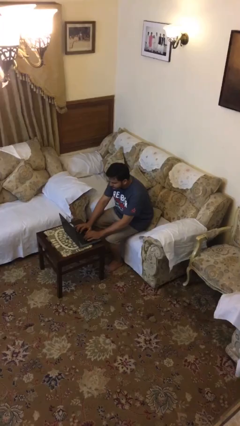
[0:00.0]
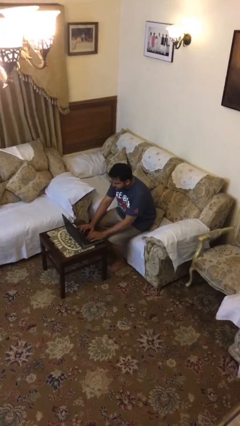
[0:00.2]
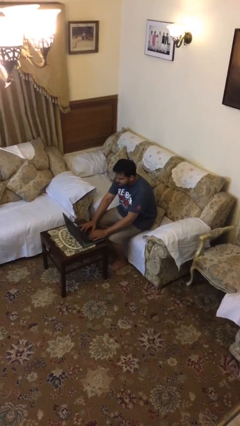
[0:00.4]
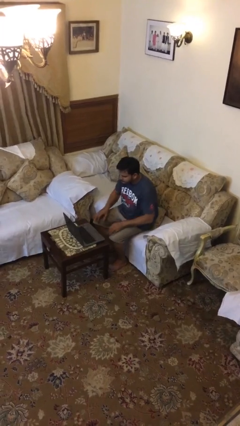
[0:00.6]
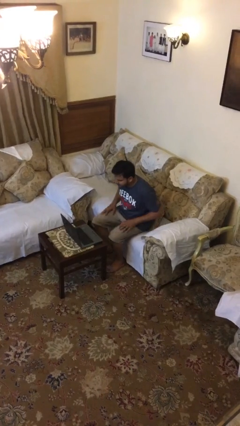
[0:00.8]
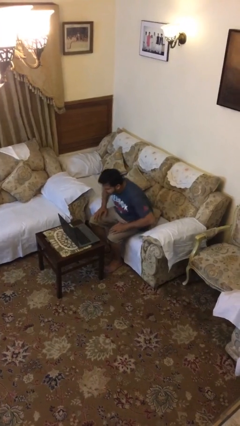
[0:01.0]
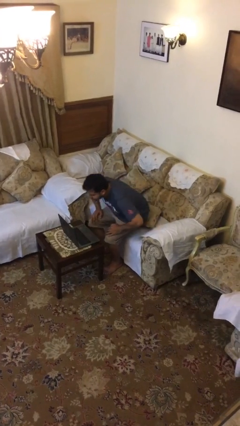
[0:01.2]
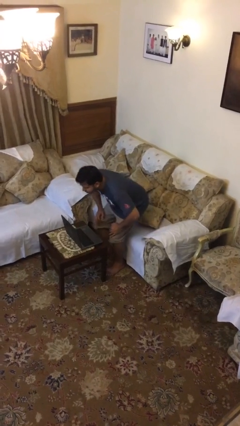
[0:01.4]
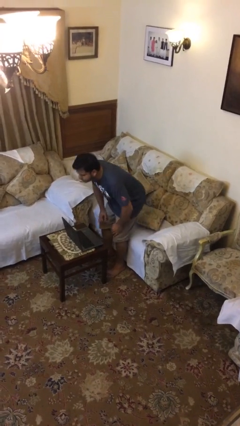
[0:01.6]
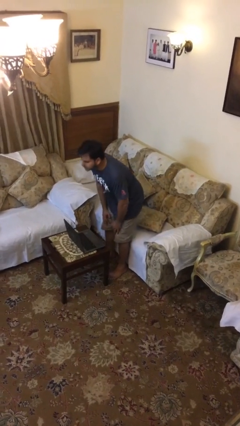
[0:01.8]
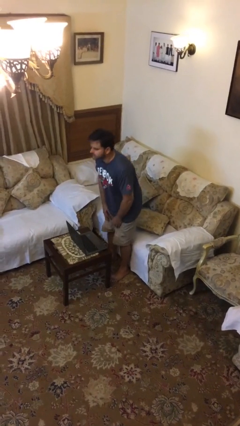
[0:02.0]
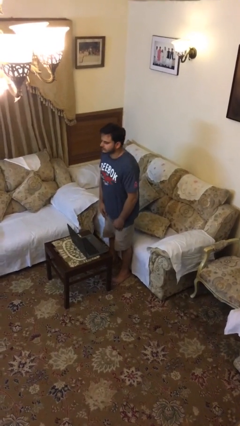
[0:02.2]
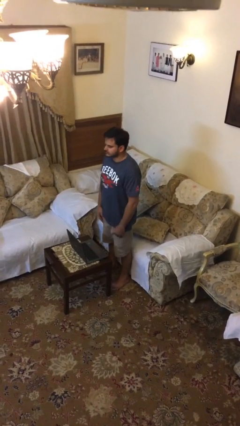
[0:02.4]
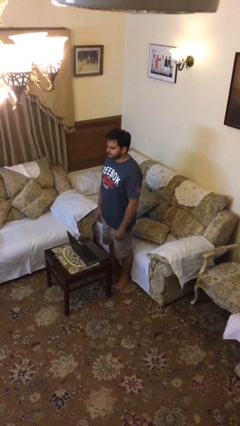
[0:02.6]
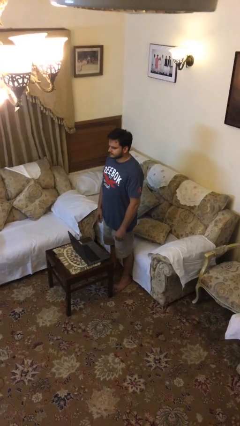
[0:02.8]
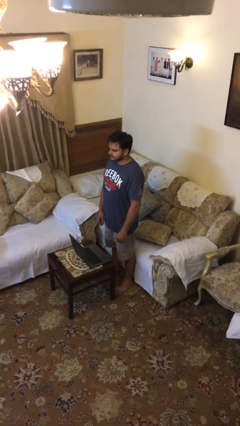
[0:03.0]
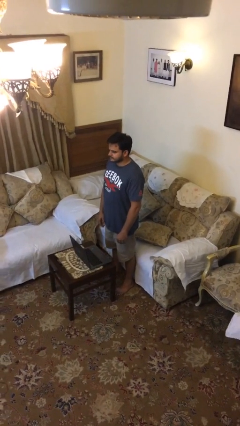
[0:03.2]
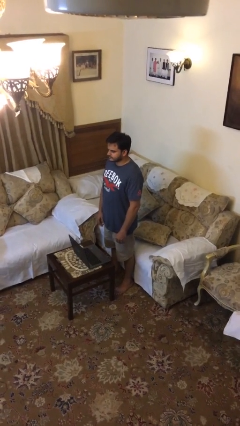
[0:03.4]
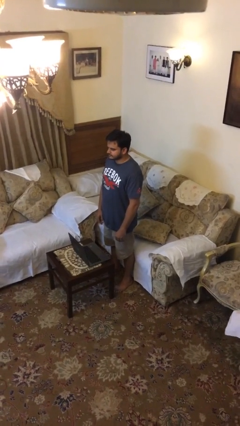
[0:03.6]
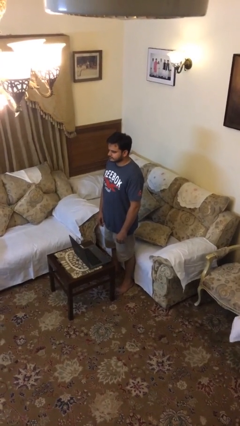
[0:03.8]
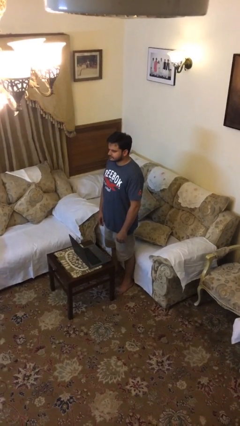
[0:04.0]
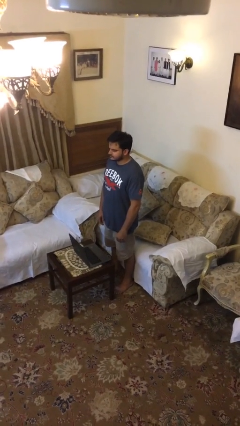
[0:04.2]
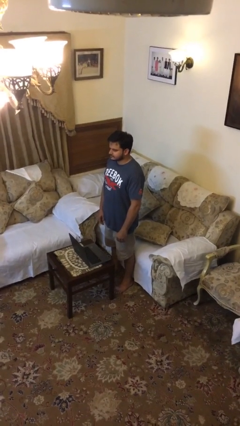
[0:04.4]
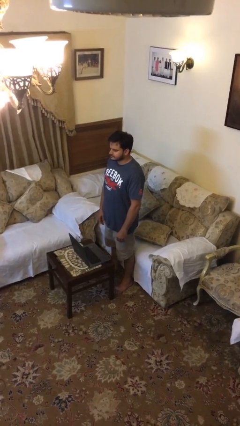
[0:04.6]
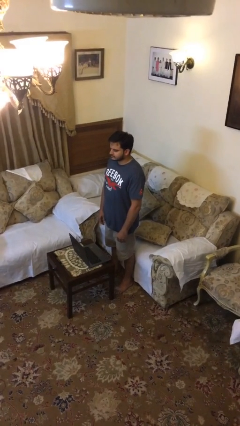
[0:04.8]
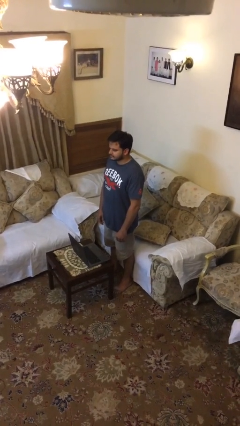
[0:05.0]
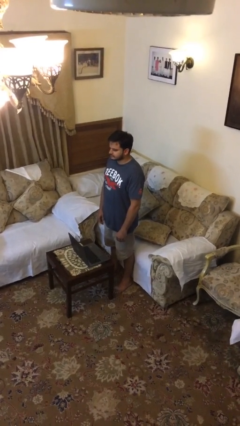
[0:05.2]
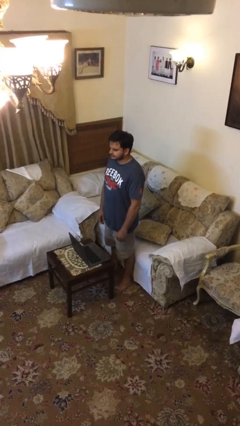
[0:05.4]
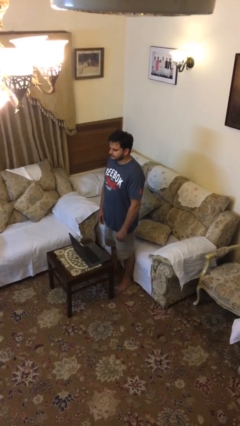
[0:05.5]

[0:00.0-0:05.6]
person stands up

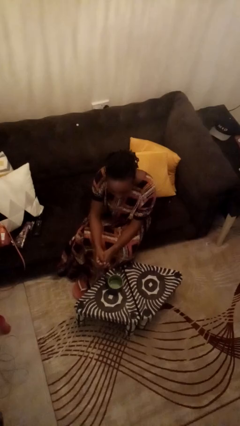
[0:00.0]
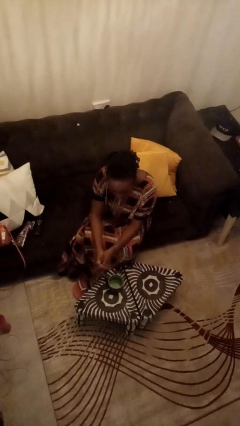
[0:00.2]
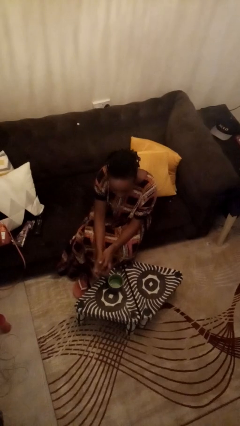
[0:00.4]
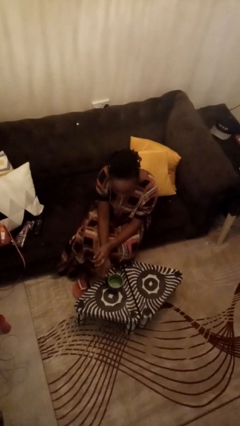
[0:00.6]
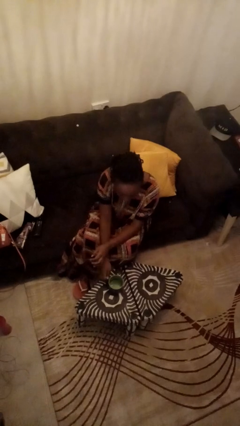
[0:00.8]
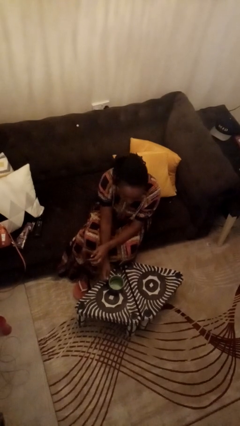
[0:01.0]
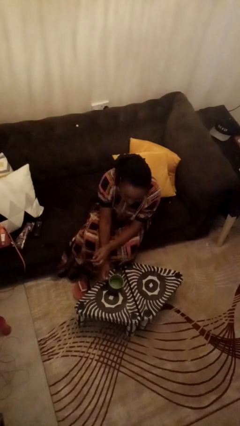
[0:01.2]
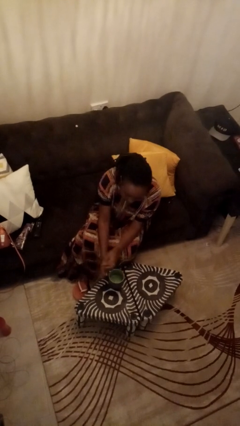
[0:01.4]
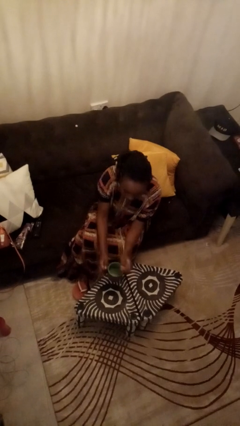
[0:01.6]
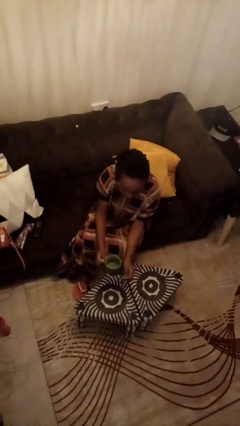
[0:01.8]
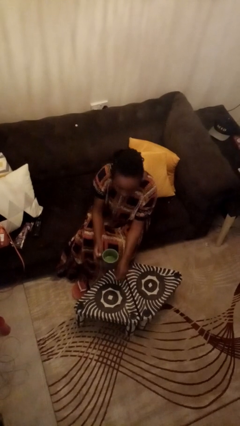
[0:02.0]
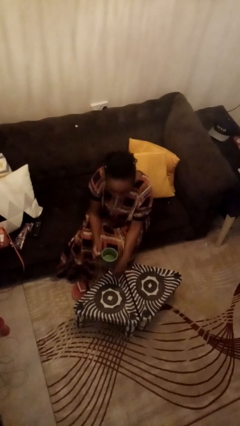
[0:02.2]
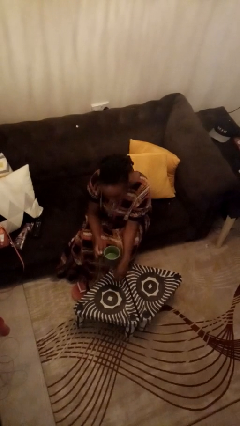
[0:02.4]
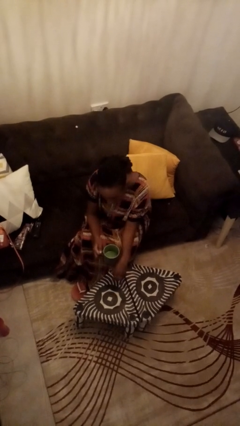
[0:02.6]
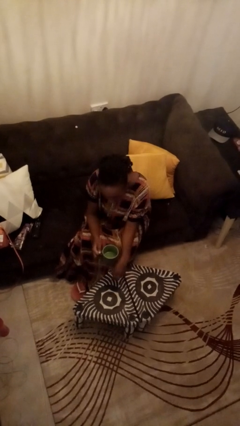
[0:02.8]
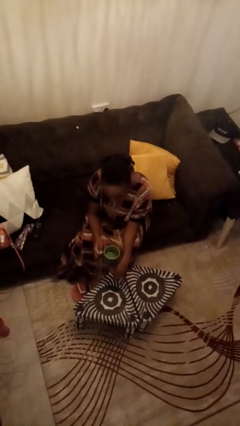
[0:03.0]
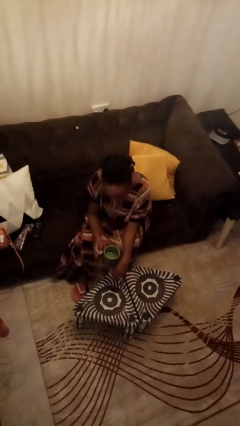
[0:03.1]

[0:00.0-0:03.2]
person picks up object from table

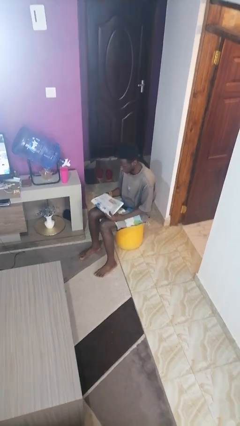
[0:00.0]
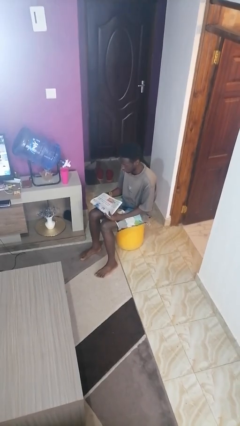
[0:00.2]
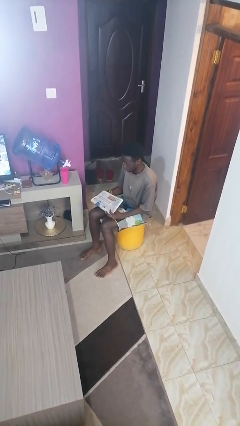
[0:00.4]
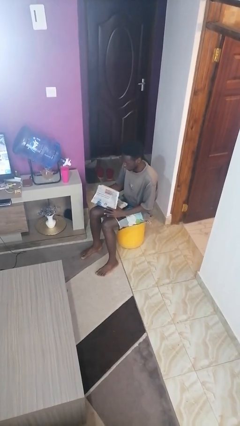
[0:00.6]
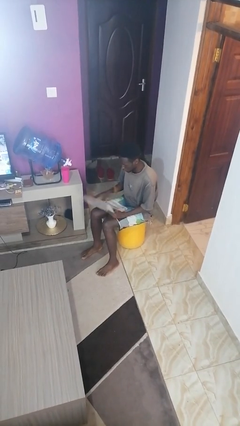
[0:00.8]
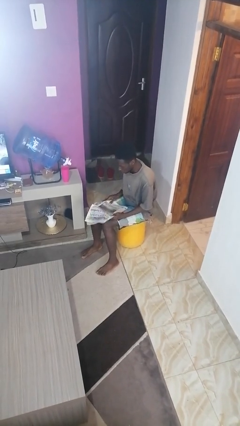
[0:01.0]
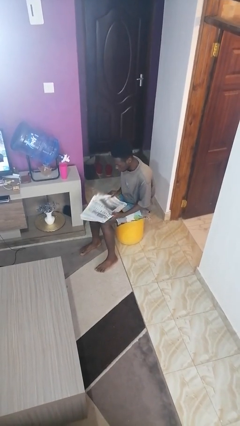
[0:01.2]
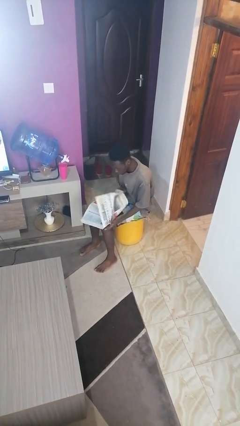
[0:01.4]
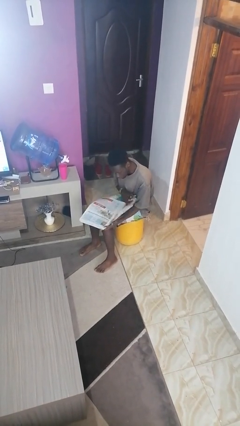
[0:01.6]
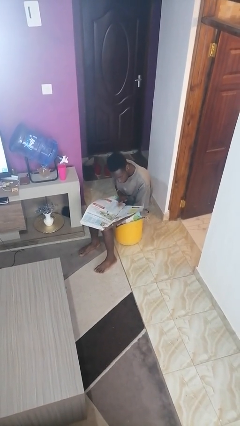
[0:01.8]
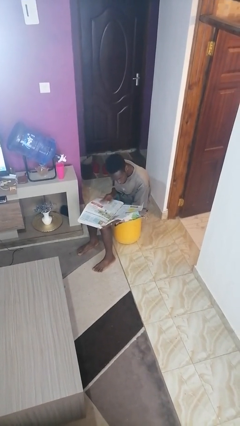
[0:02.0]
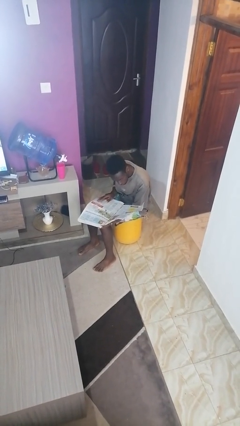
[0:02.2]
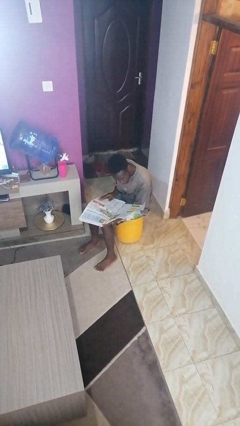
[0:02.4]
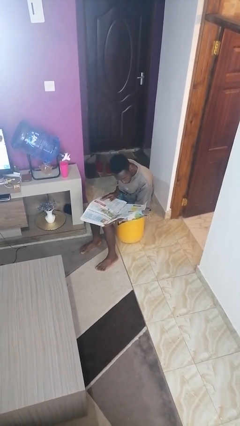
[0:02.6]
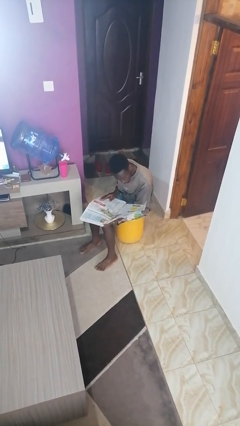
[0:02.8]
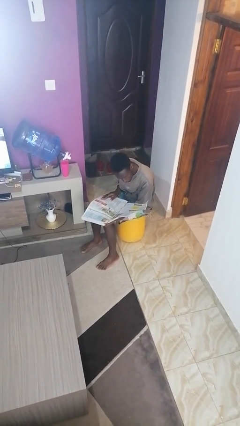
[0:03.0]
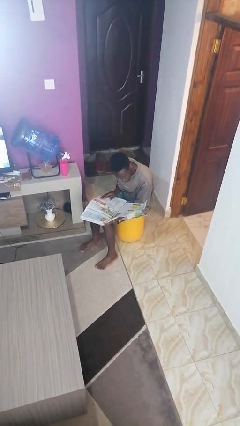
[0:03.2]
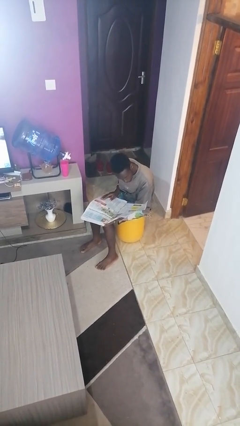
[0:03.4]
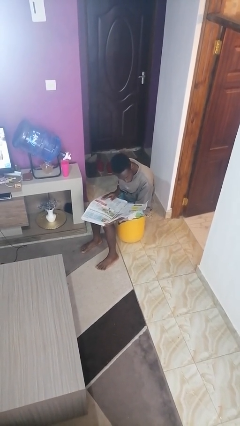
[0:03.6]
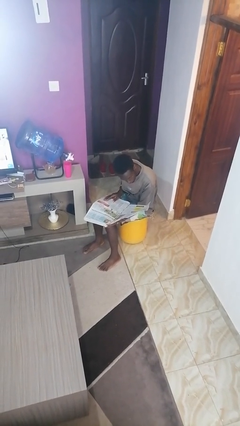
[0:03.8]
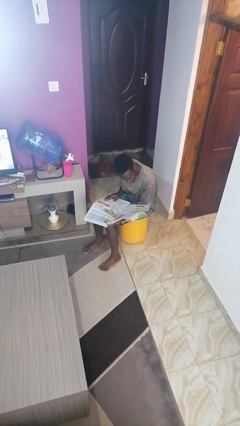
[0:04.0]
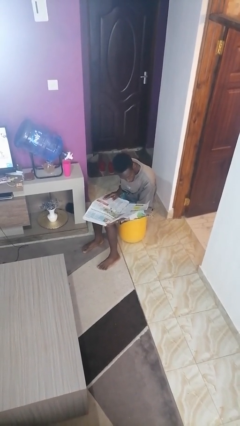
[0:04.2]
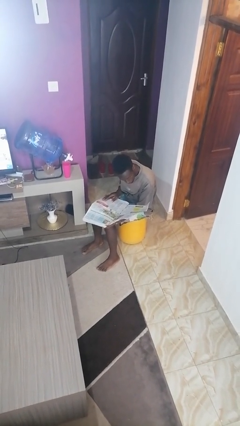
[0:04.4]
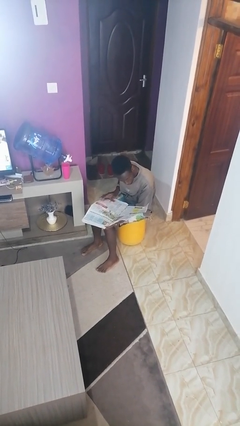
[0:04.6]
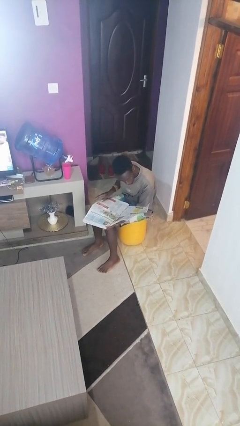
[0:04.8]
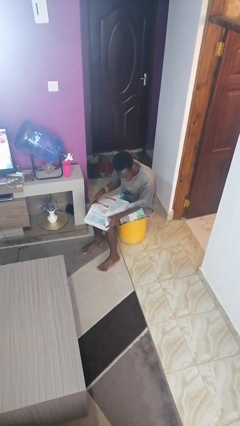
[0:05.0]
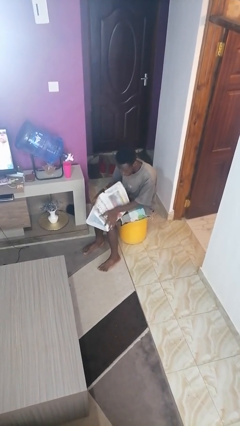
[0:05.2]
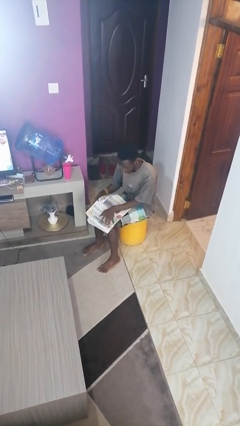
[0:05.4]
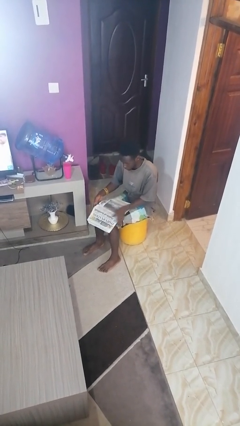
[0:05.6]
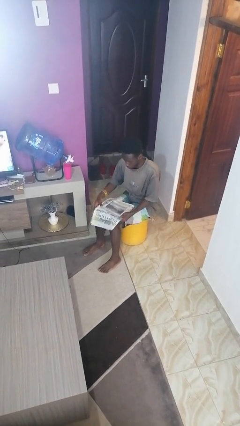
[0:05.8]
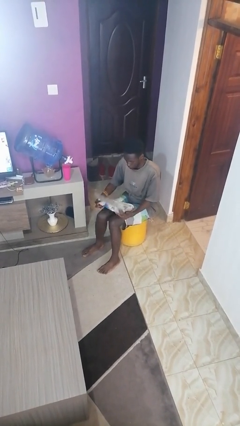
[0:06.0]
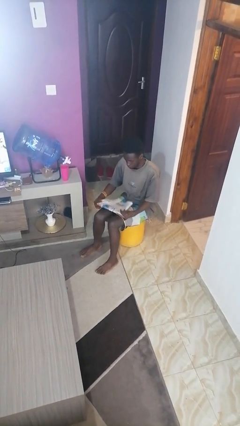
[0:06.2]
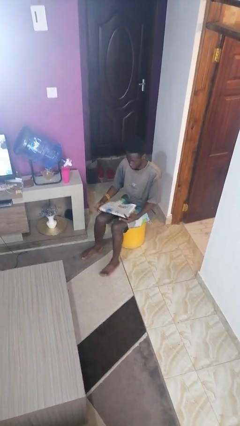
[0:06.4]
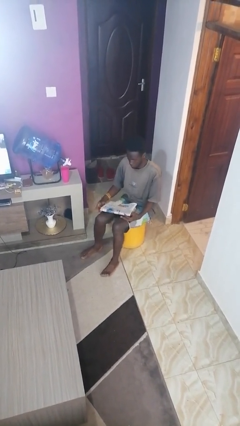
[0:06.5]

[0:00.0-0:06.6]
person reads newspaper

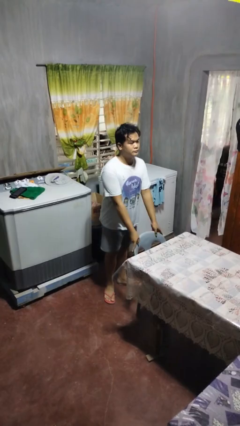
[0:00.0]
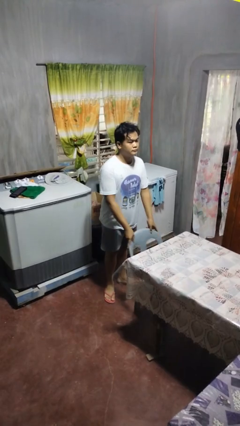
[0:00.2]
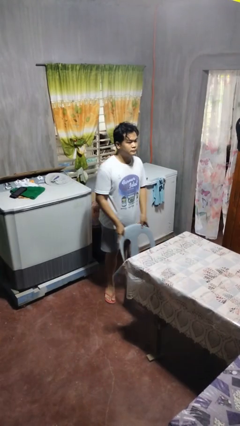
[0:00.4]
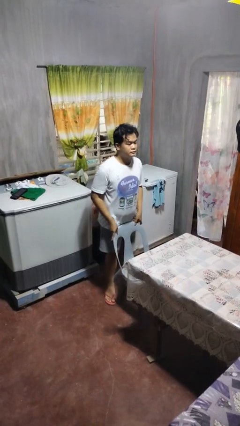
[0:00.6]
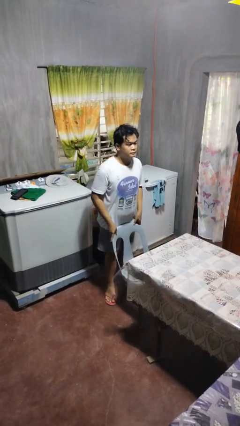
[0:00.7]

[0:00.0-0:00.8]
person pulls out chair

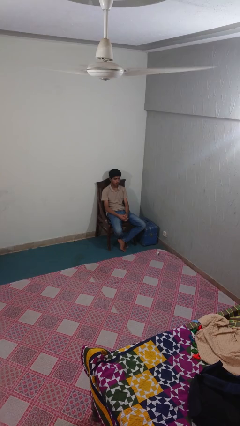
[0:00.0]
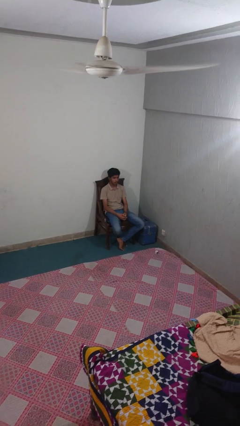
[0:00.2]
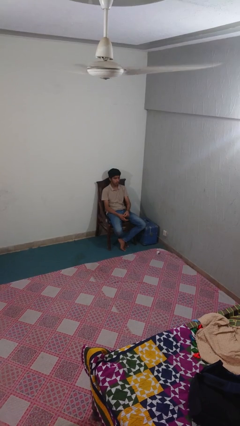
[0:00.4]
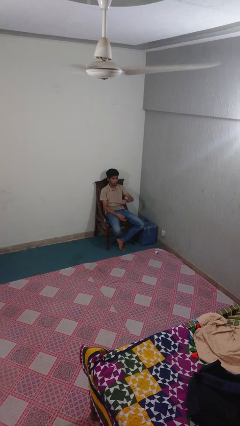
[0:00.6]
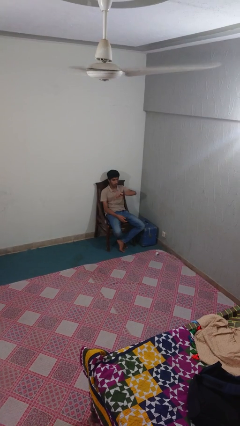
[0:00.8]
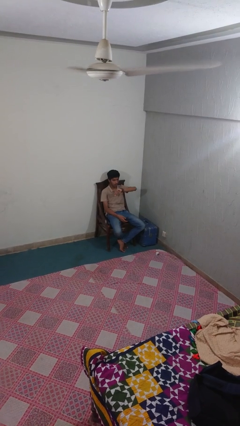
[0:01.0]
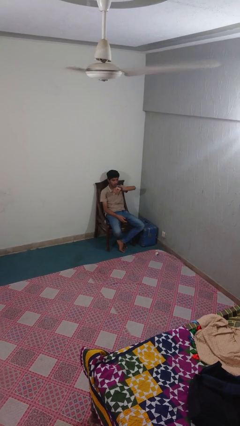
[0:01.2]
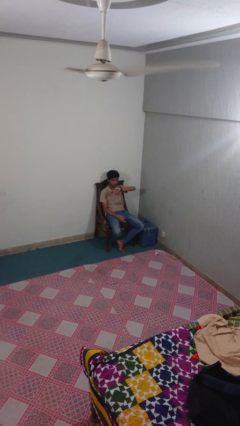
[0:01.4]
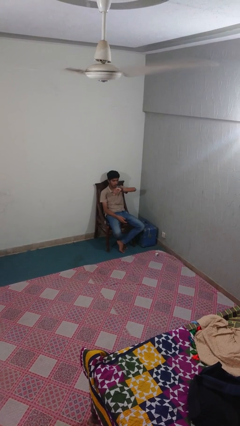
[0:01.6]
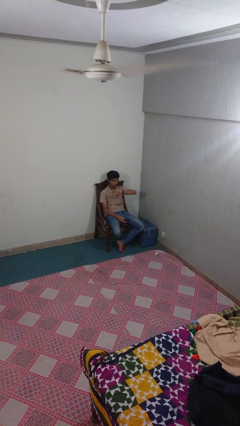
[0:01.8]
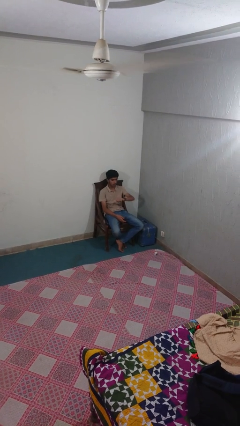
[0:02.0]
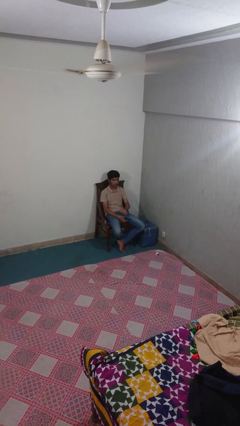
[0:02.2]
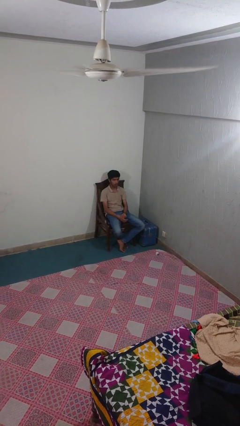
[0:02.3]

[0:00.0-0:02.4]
person looks at wristwatch
